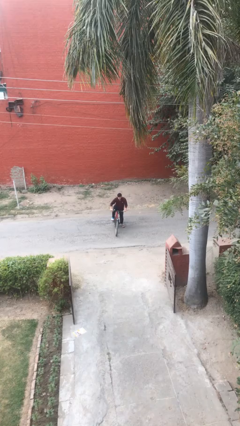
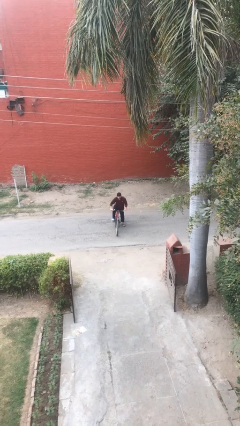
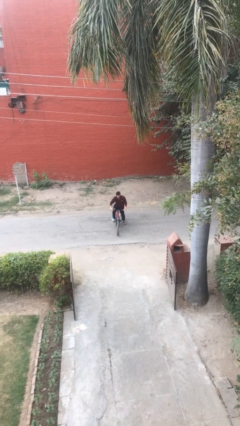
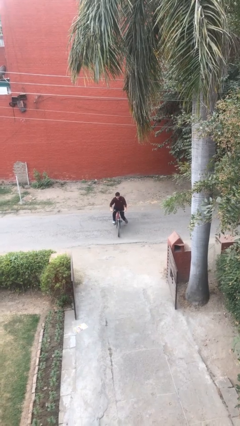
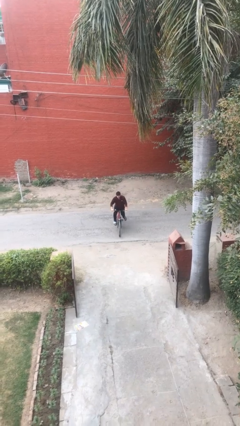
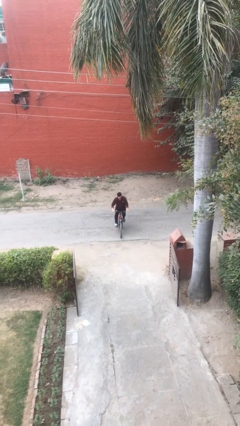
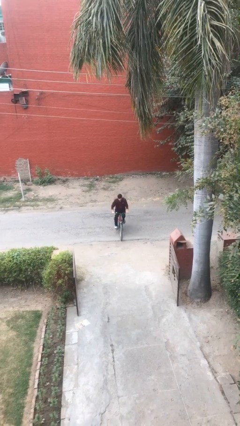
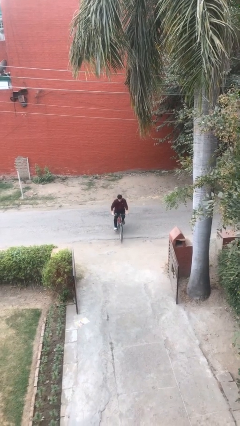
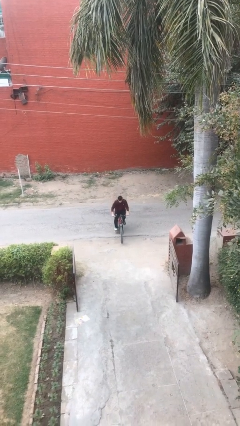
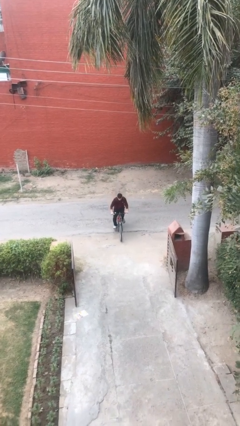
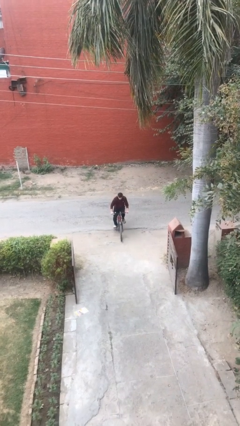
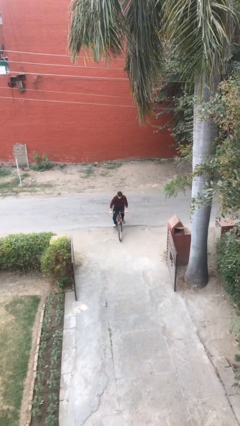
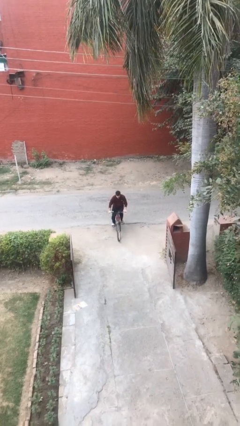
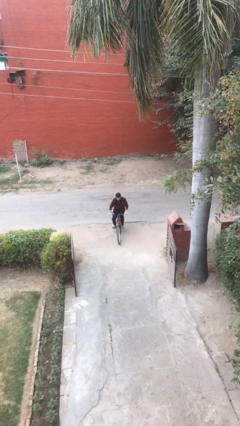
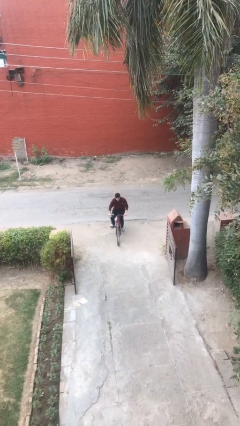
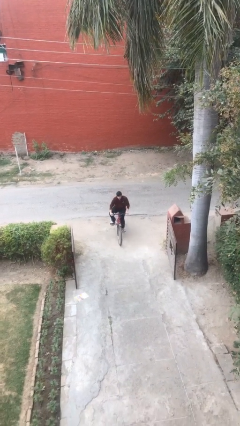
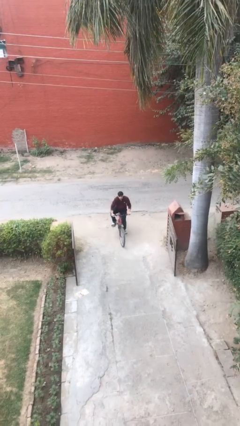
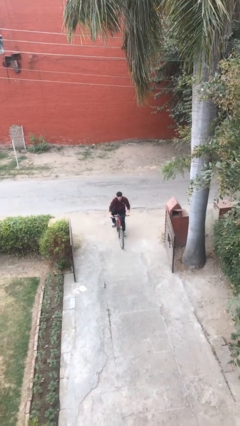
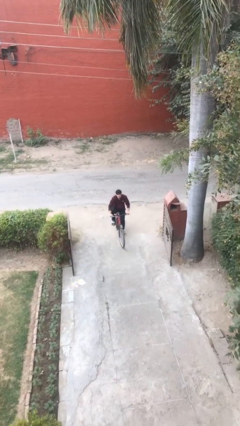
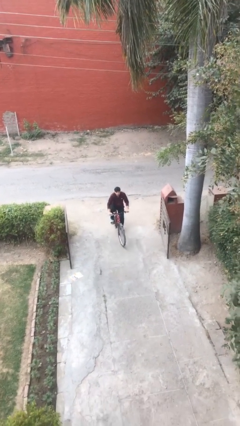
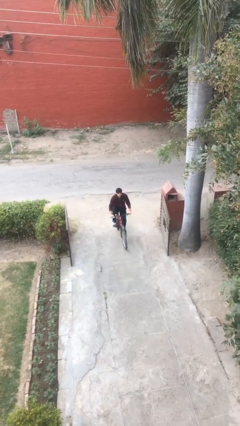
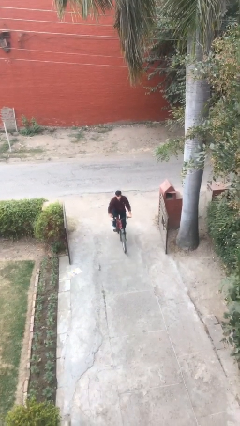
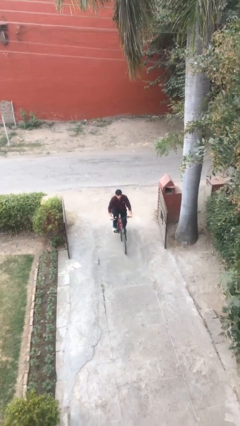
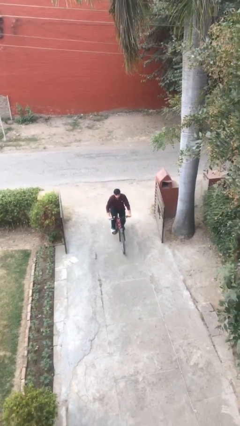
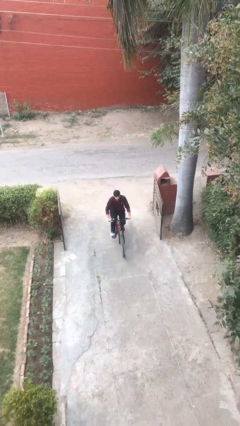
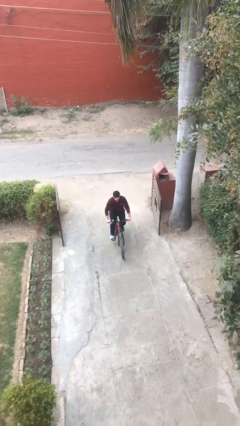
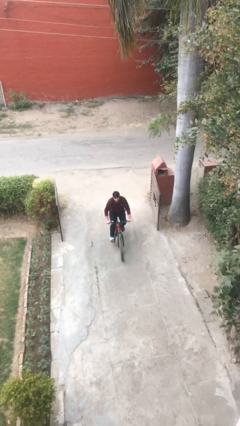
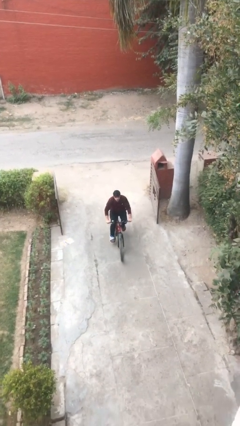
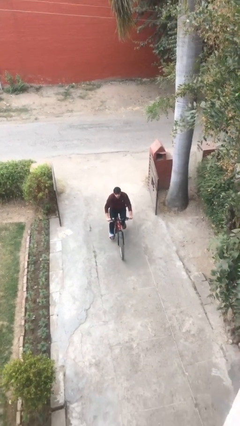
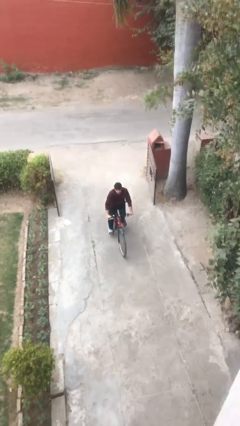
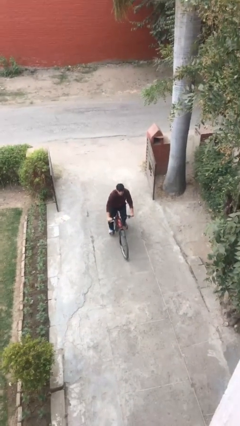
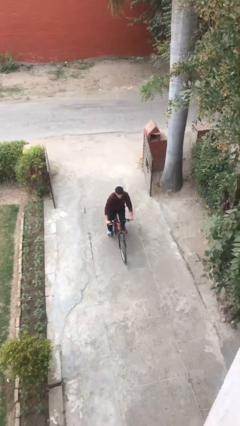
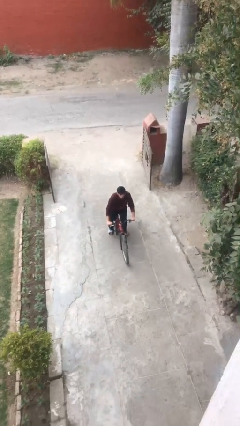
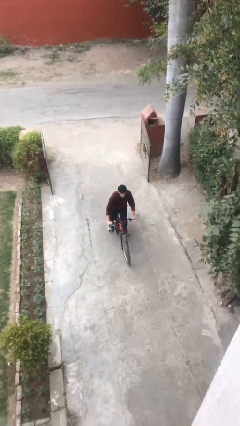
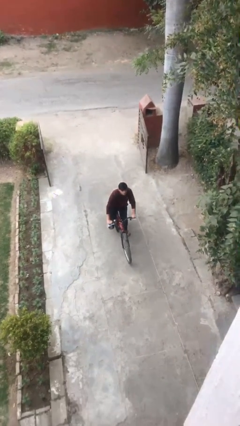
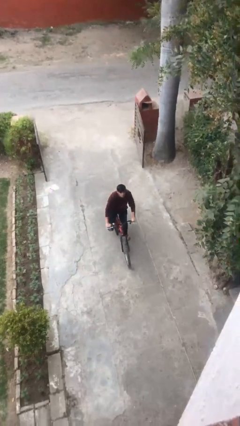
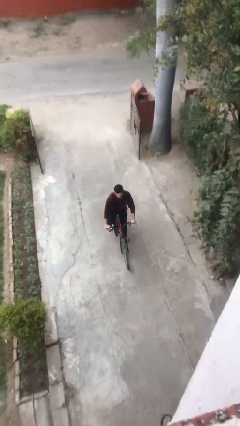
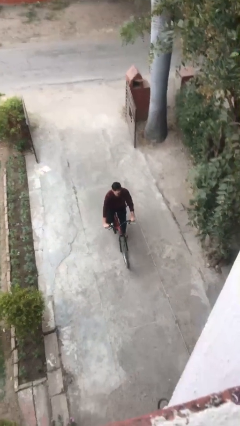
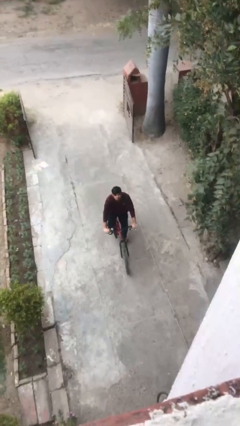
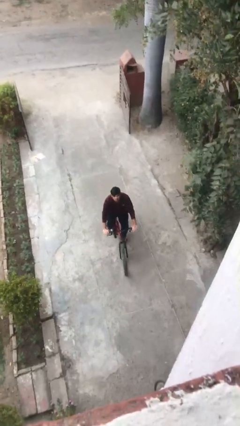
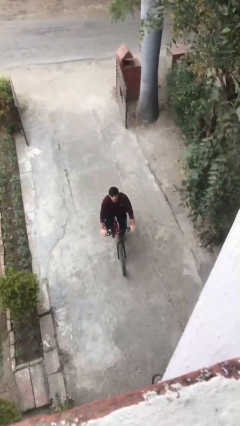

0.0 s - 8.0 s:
person rides bicycle

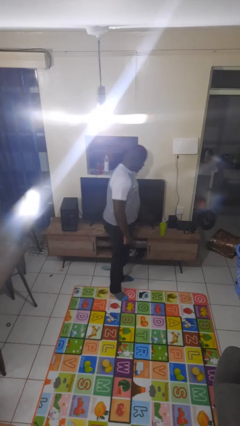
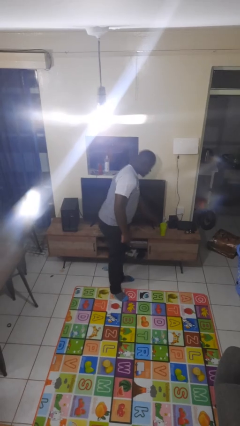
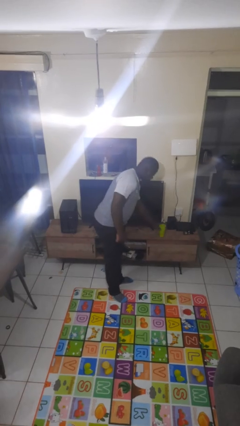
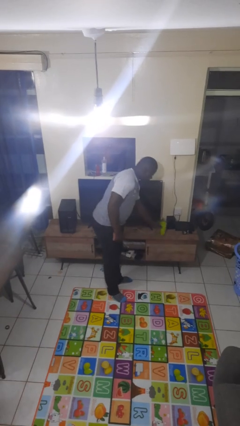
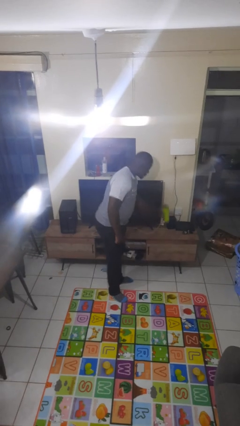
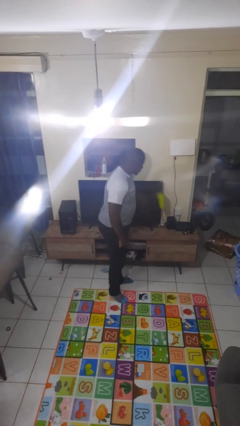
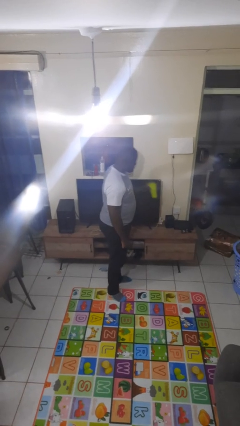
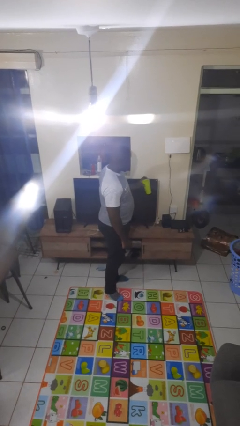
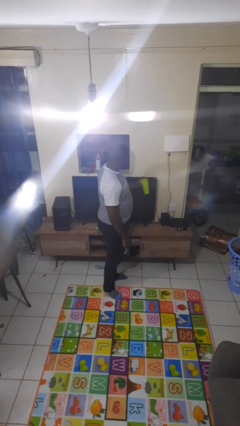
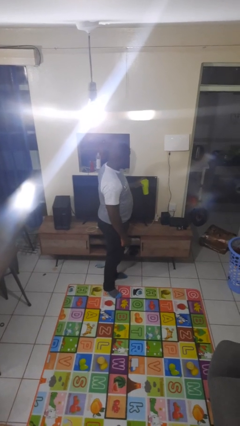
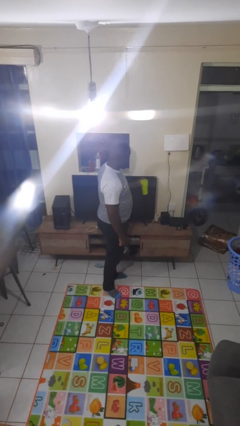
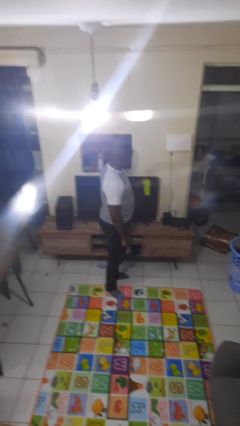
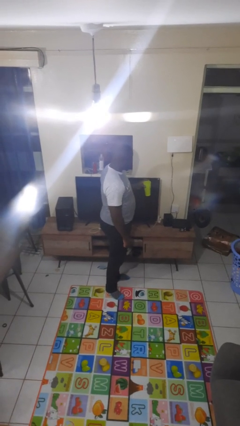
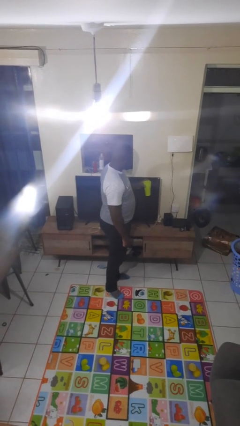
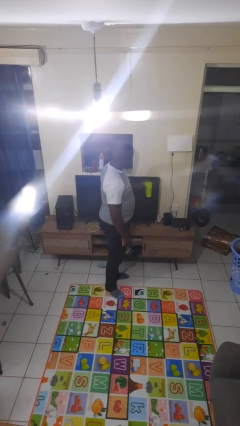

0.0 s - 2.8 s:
person picks up object from countertop

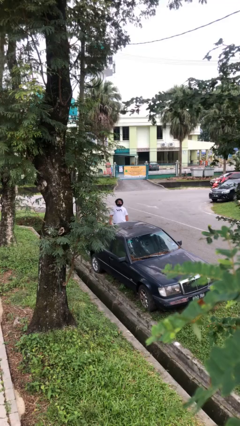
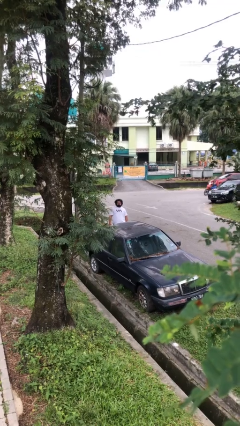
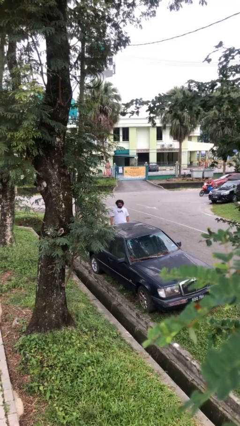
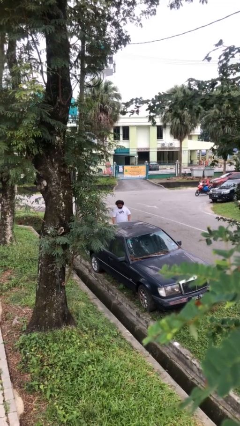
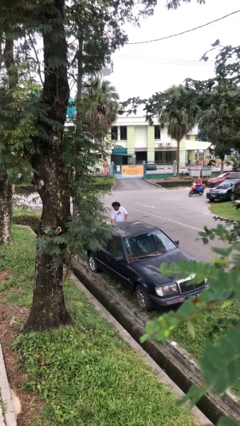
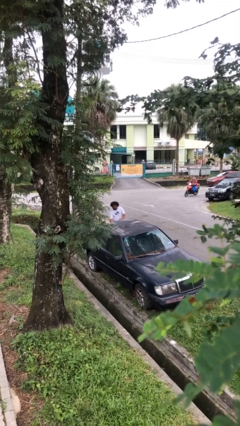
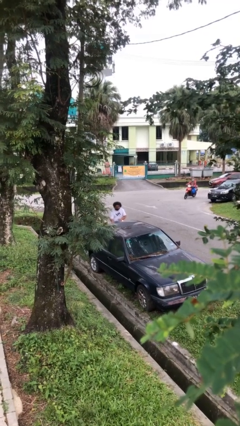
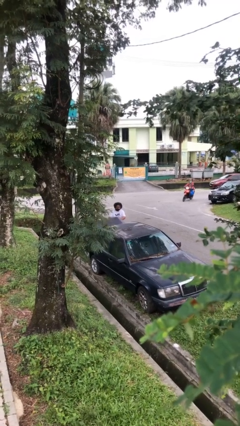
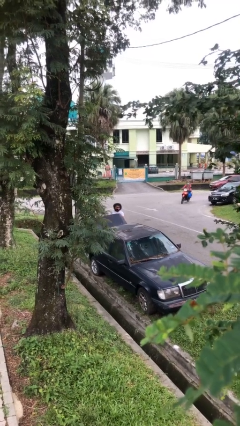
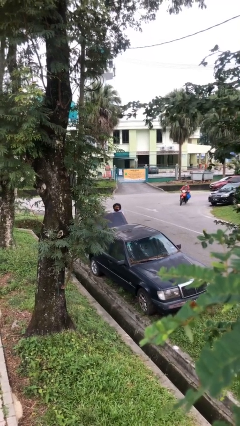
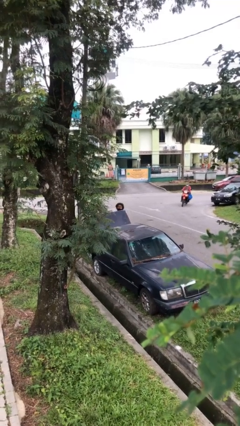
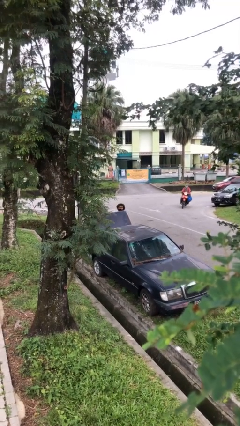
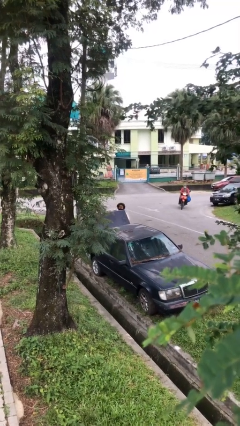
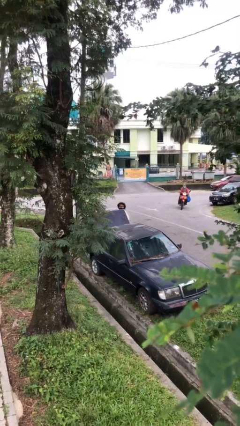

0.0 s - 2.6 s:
person opens car trunk

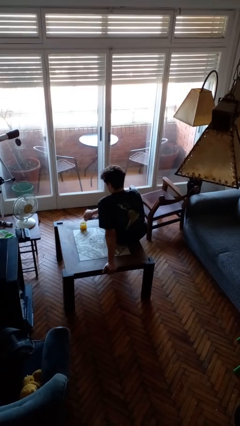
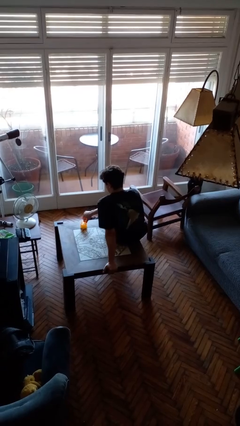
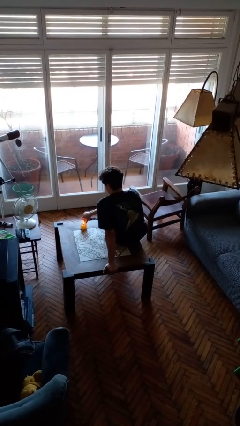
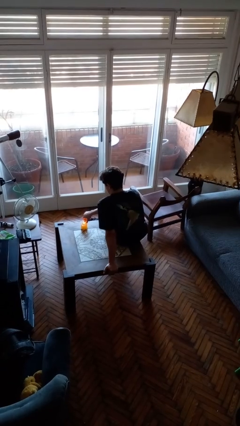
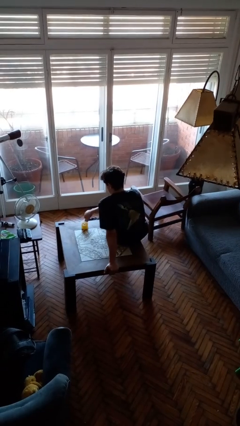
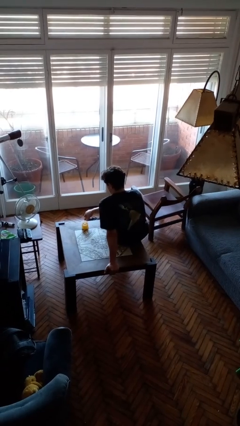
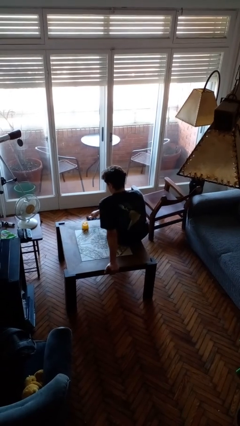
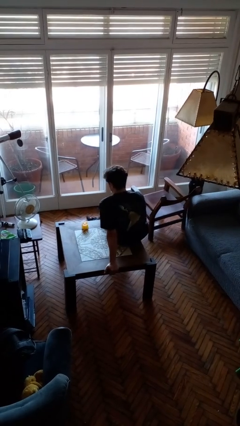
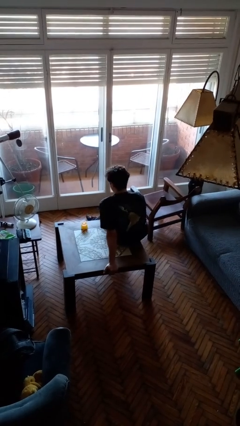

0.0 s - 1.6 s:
person lights candle

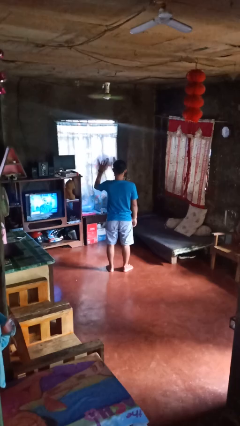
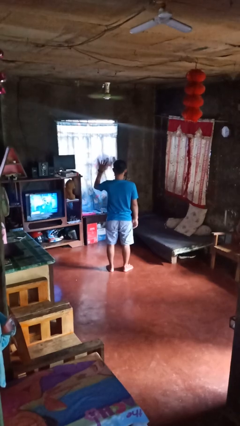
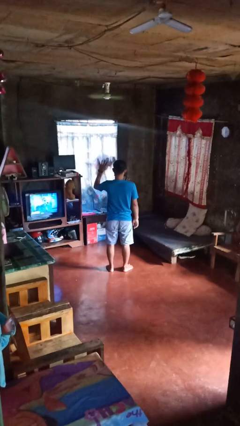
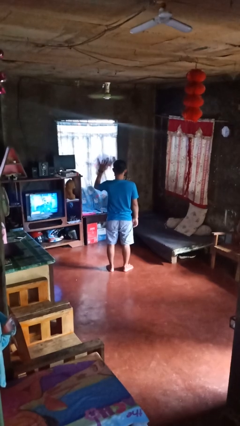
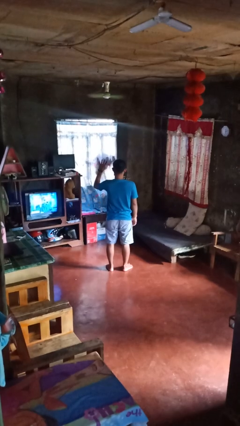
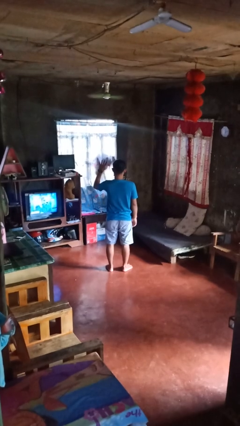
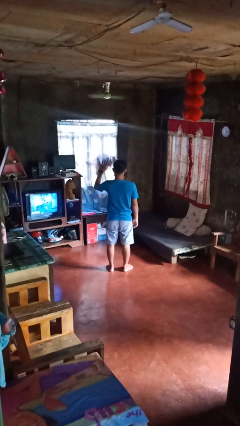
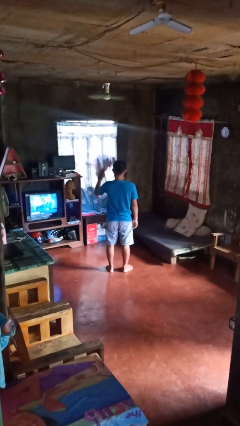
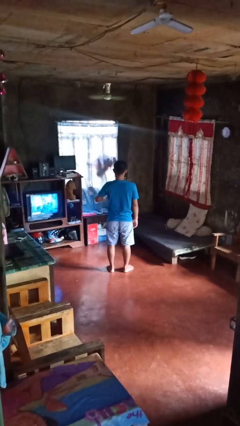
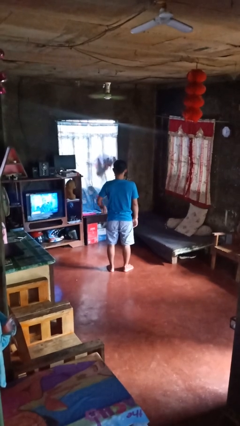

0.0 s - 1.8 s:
person gestures number four

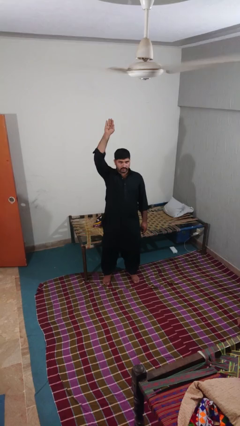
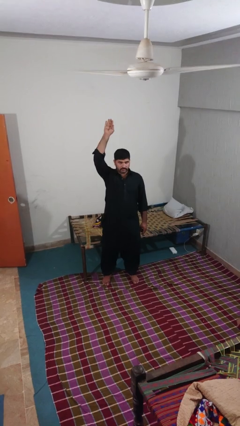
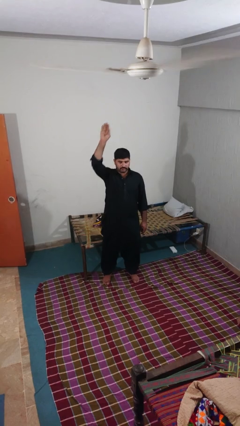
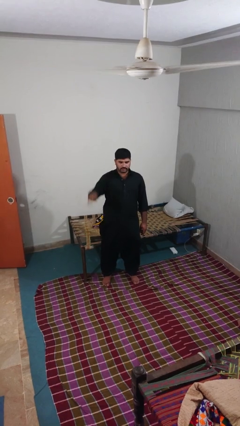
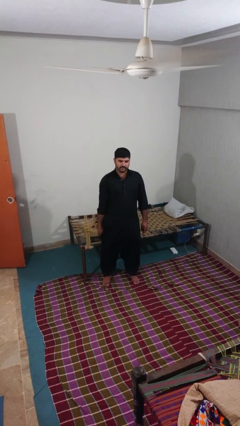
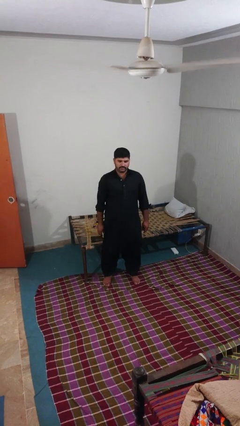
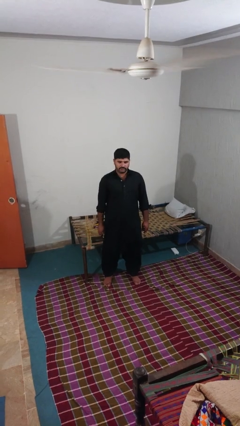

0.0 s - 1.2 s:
person gestures lower hand
